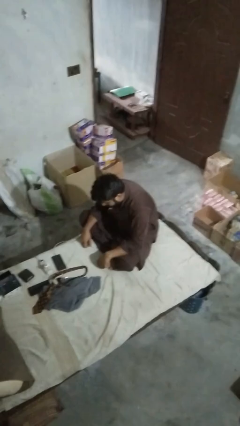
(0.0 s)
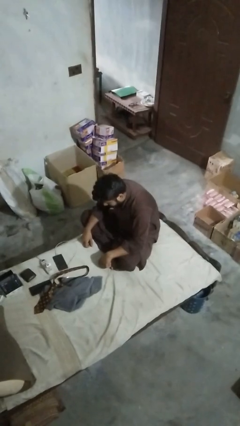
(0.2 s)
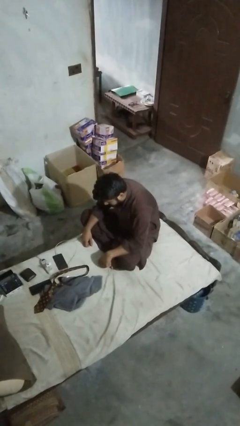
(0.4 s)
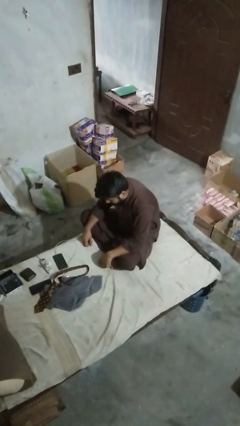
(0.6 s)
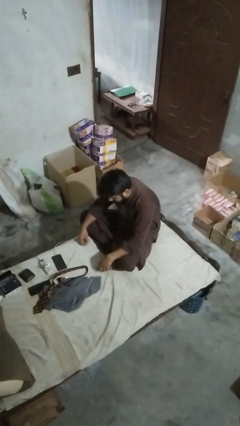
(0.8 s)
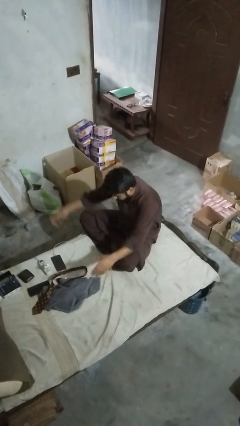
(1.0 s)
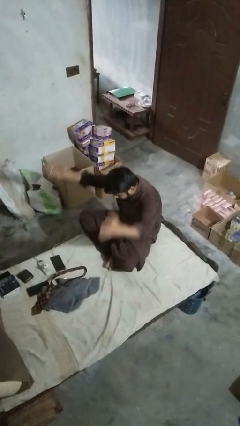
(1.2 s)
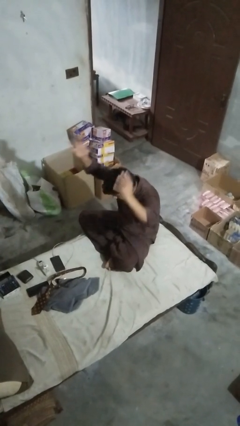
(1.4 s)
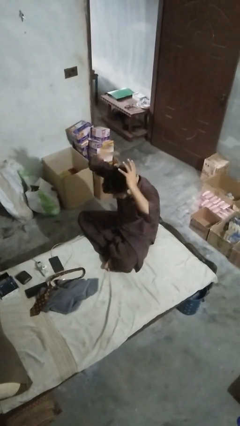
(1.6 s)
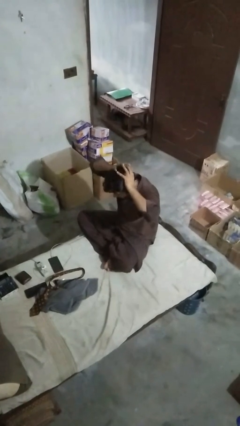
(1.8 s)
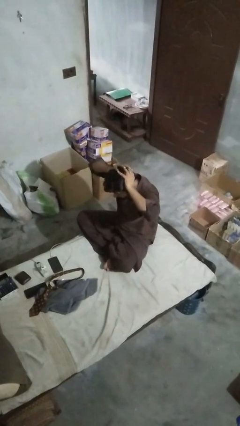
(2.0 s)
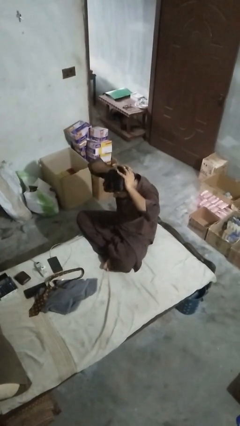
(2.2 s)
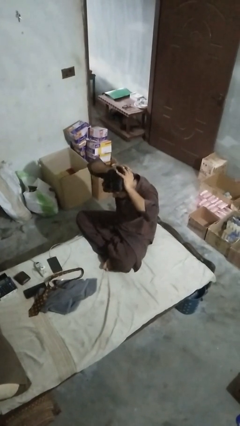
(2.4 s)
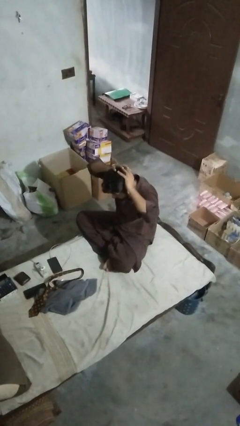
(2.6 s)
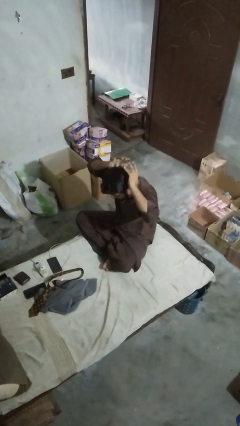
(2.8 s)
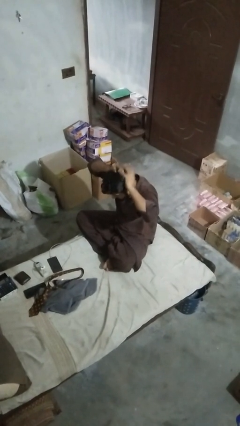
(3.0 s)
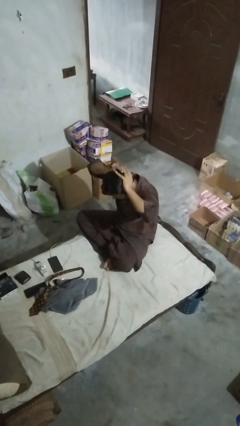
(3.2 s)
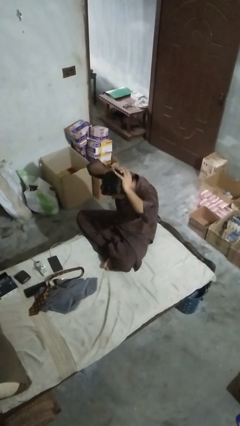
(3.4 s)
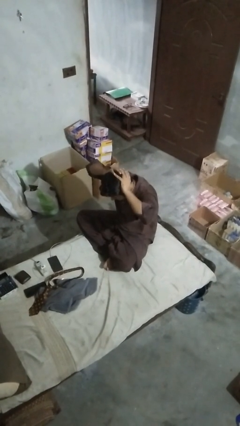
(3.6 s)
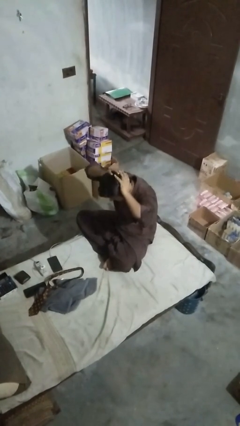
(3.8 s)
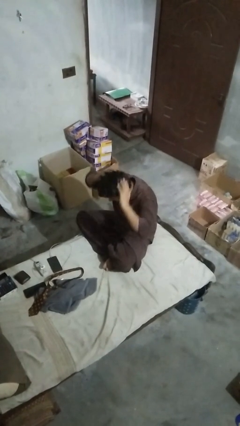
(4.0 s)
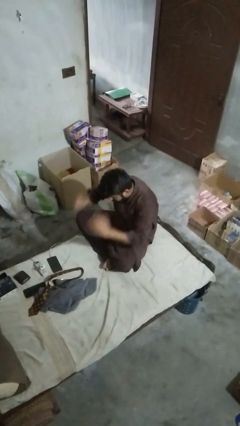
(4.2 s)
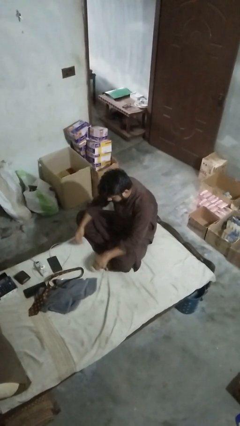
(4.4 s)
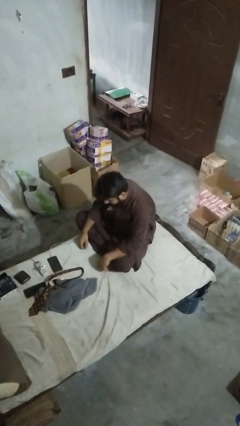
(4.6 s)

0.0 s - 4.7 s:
person pats head

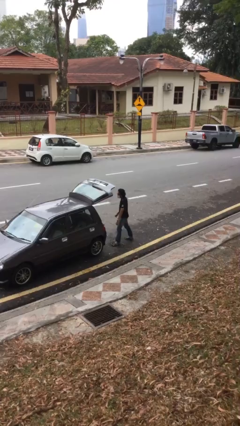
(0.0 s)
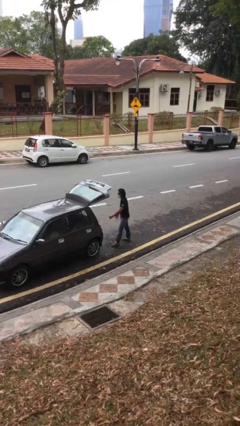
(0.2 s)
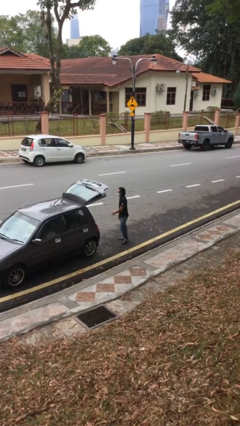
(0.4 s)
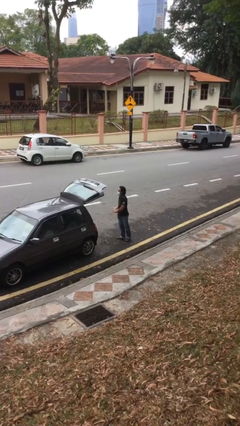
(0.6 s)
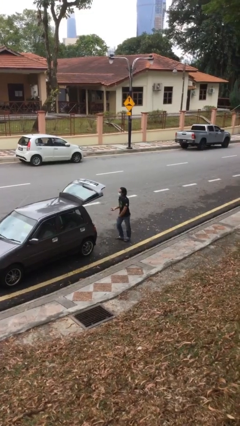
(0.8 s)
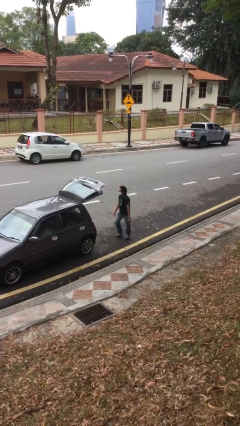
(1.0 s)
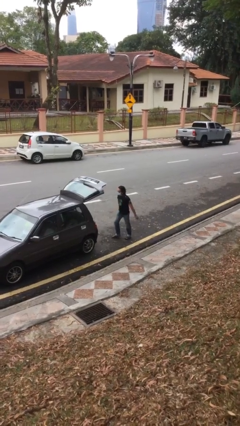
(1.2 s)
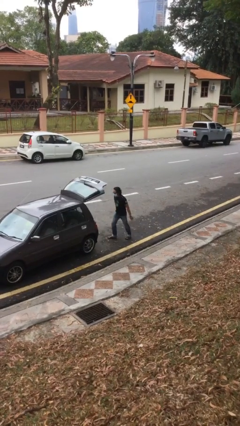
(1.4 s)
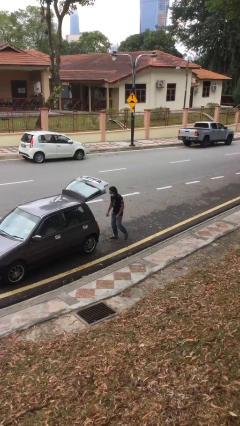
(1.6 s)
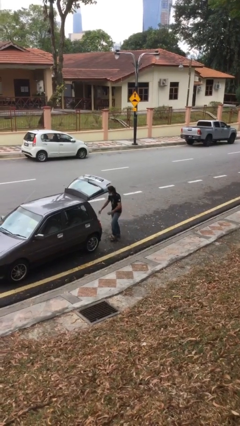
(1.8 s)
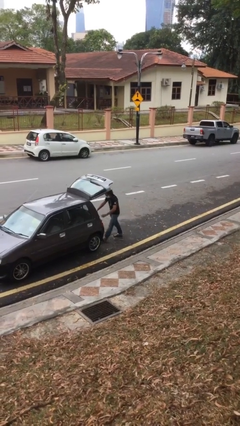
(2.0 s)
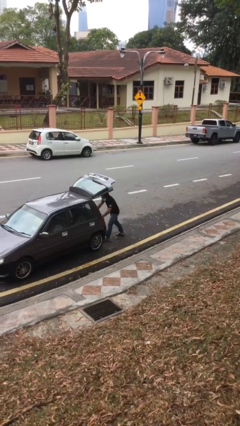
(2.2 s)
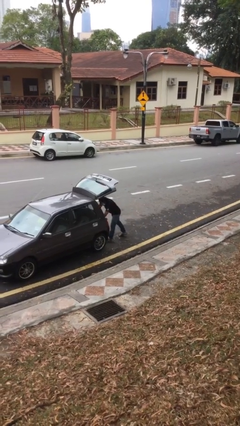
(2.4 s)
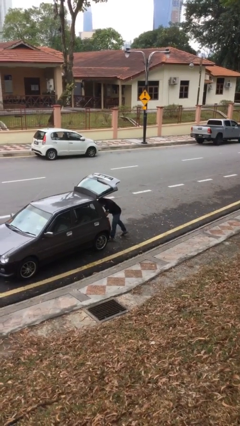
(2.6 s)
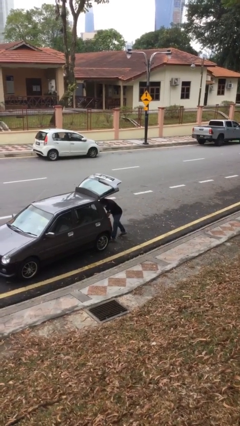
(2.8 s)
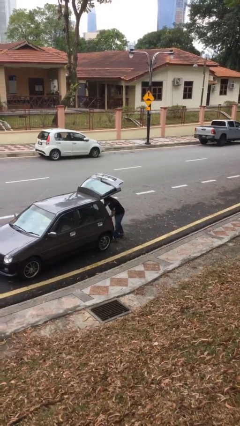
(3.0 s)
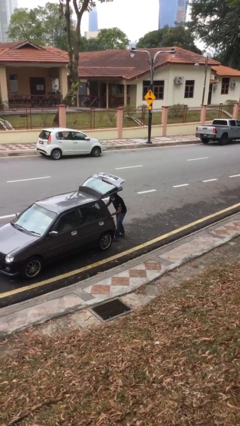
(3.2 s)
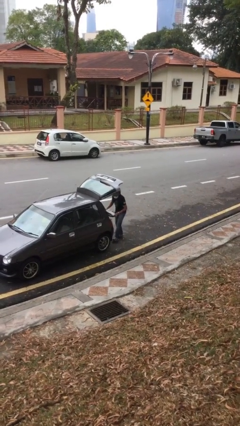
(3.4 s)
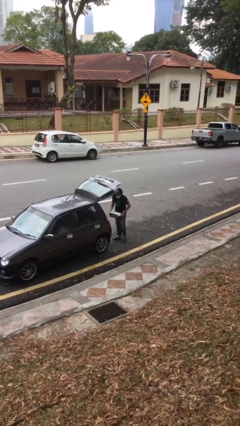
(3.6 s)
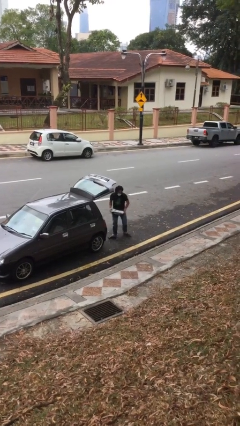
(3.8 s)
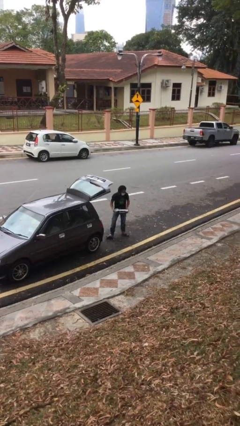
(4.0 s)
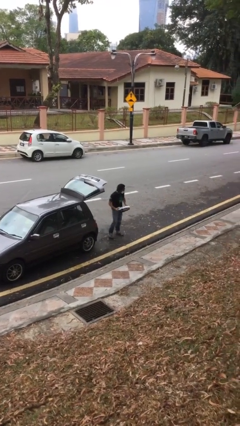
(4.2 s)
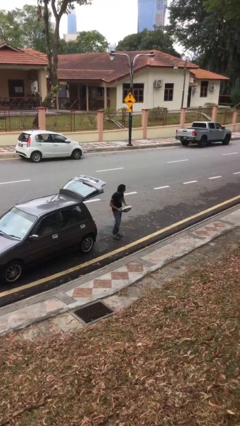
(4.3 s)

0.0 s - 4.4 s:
person unloads car

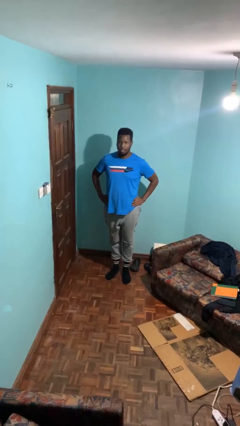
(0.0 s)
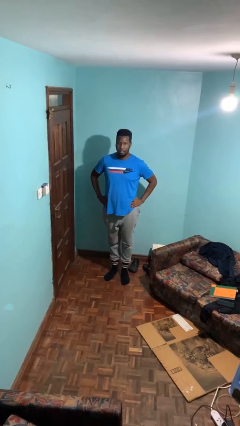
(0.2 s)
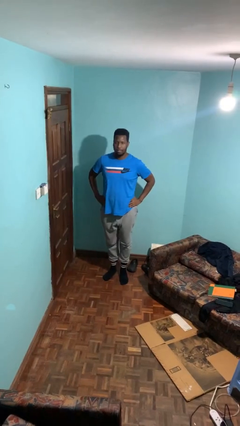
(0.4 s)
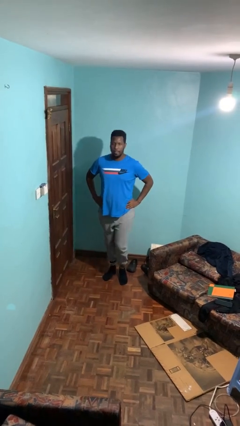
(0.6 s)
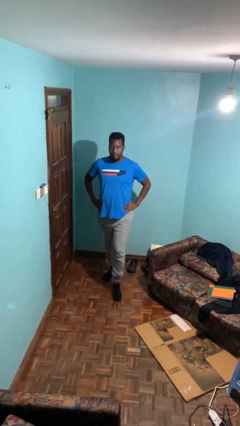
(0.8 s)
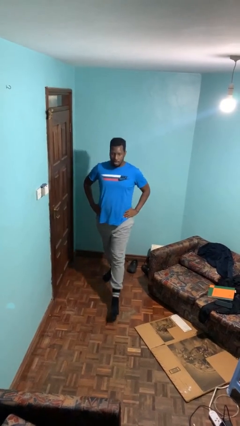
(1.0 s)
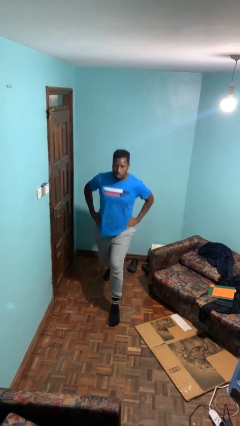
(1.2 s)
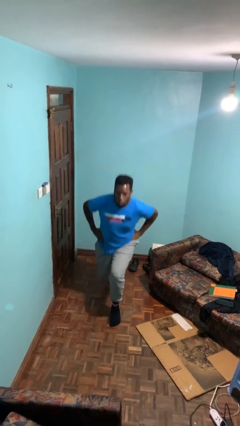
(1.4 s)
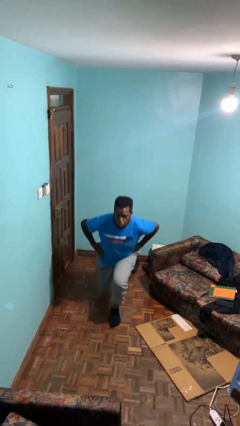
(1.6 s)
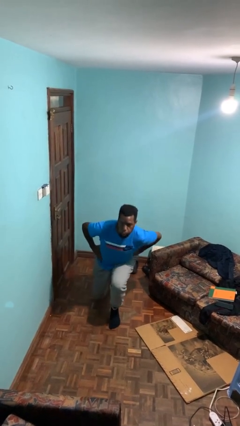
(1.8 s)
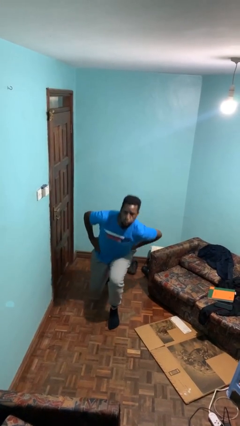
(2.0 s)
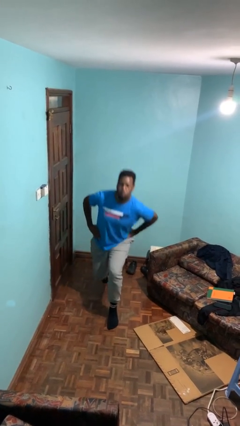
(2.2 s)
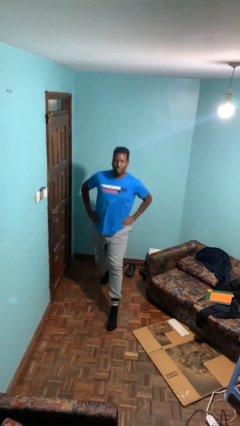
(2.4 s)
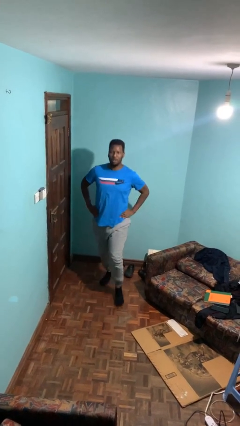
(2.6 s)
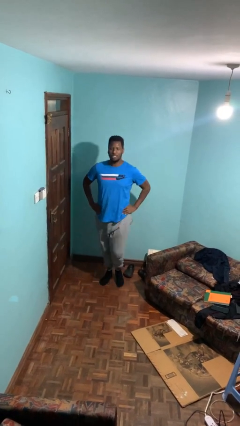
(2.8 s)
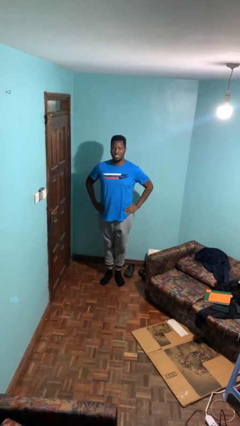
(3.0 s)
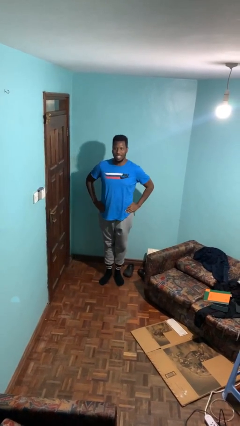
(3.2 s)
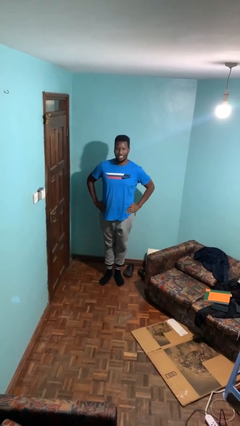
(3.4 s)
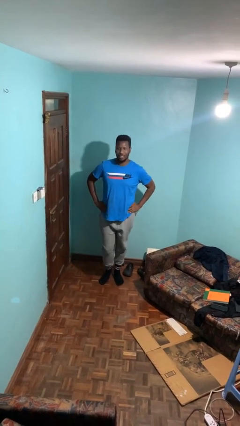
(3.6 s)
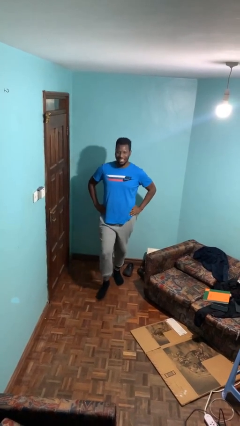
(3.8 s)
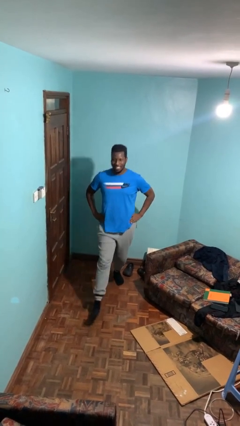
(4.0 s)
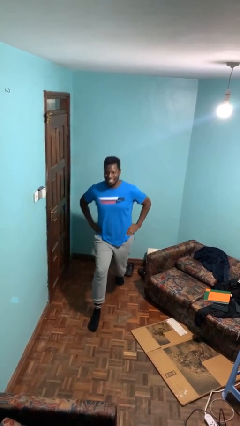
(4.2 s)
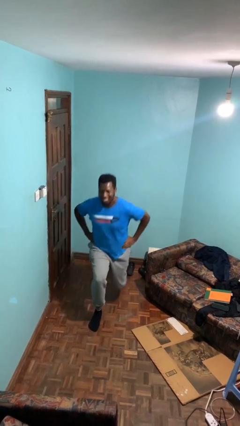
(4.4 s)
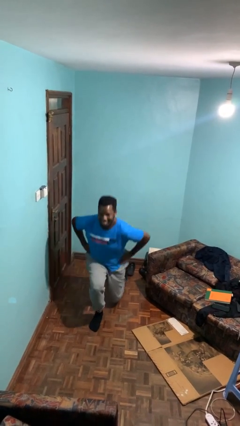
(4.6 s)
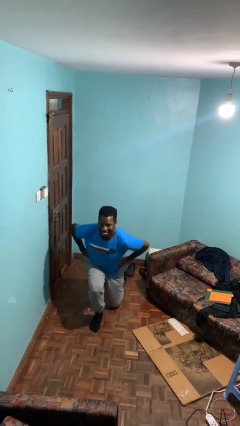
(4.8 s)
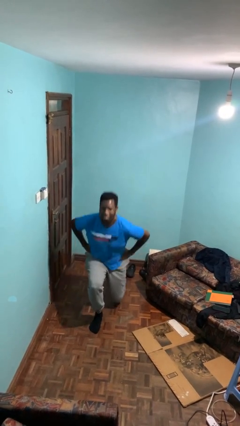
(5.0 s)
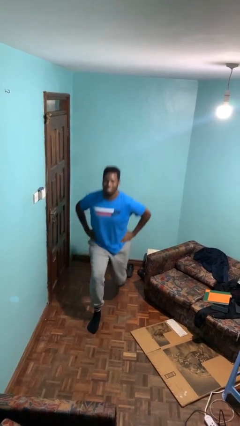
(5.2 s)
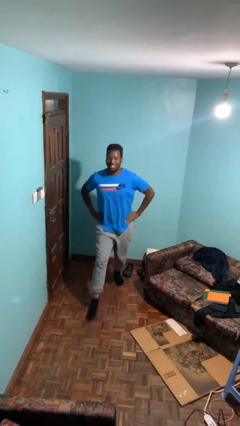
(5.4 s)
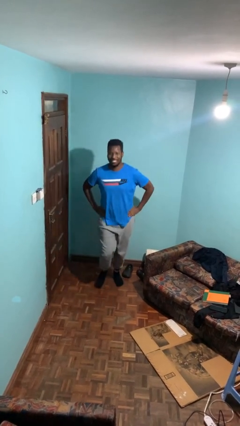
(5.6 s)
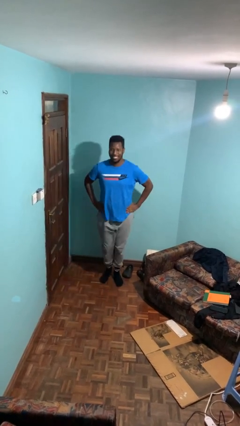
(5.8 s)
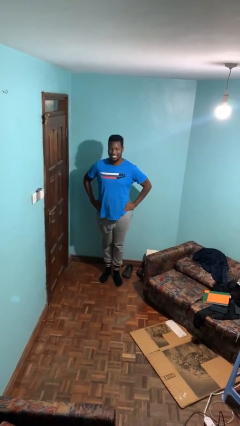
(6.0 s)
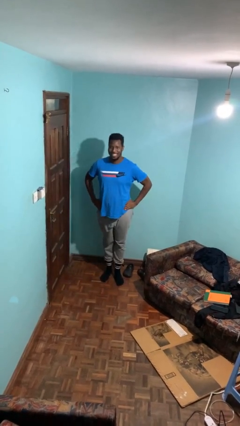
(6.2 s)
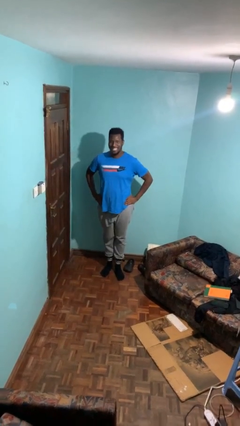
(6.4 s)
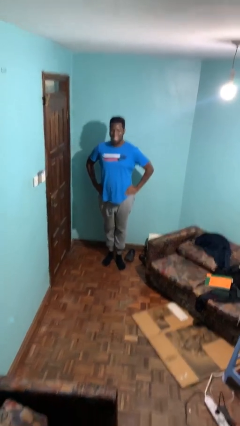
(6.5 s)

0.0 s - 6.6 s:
person exercises with lunges

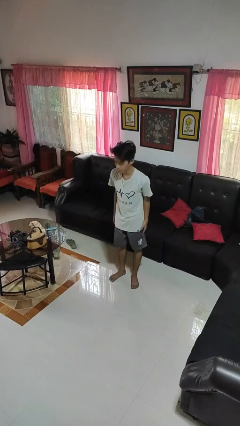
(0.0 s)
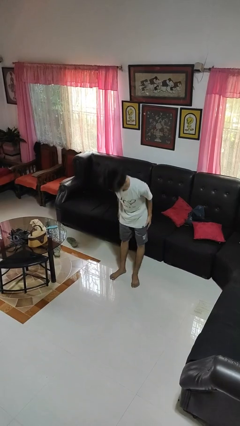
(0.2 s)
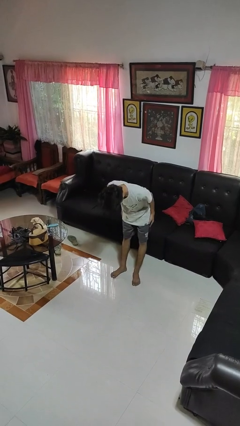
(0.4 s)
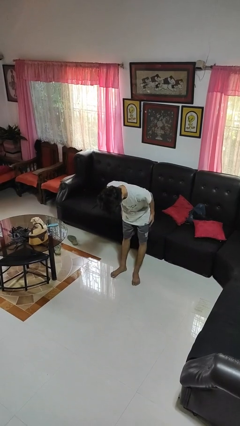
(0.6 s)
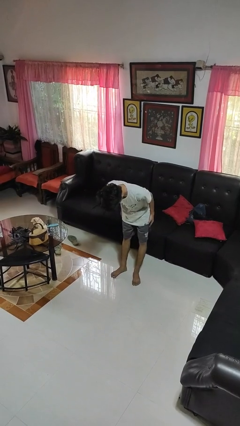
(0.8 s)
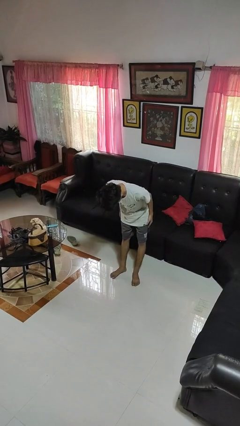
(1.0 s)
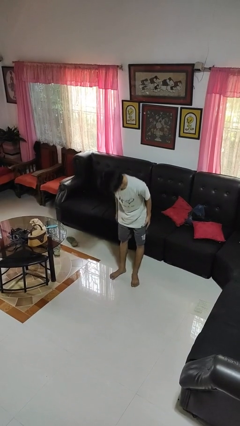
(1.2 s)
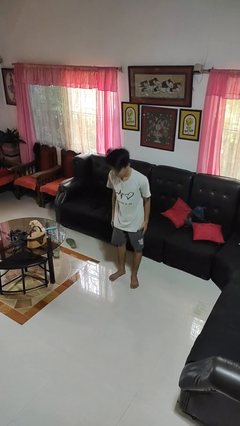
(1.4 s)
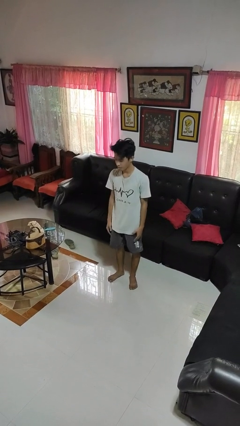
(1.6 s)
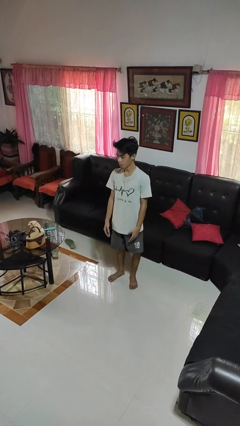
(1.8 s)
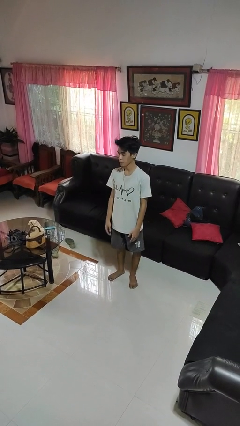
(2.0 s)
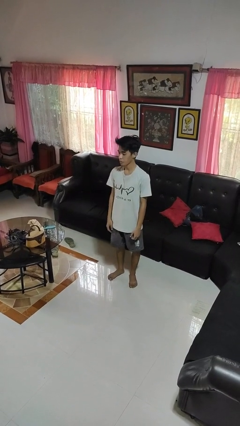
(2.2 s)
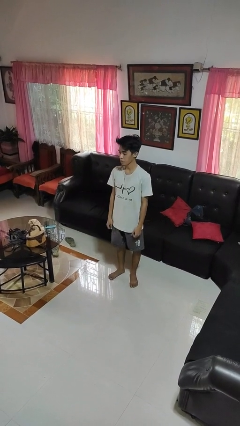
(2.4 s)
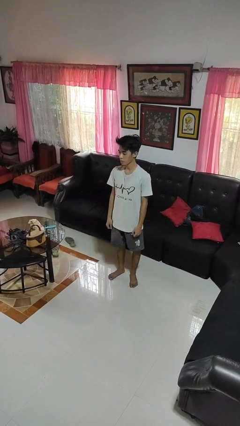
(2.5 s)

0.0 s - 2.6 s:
person bows
